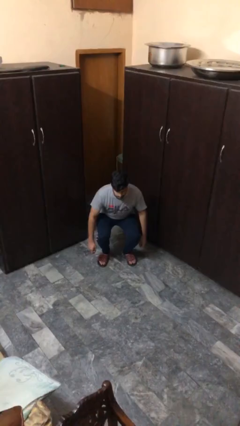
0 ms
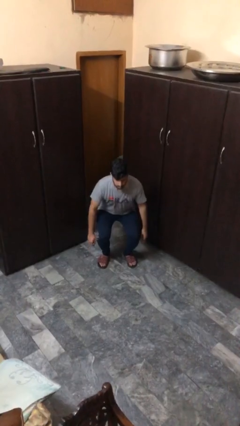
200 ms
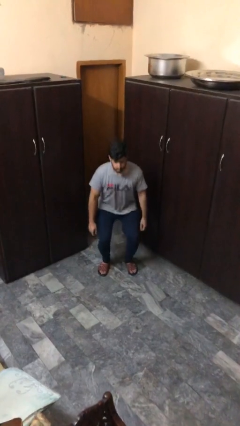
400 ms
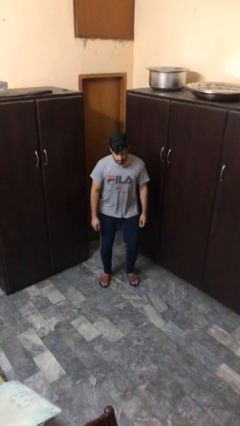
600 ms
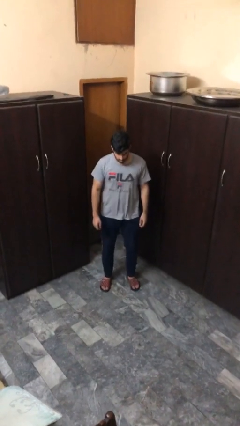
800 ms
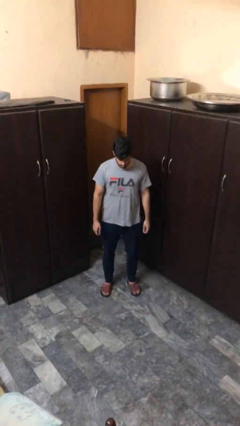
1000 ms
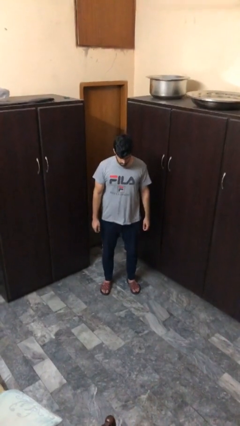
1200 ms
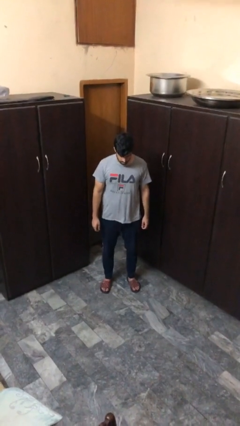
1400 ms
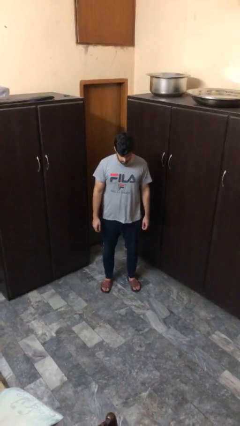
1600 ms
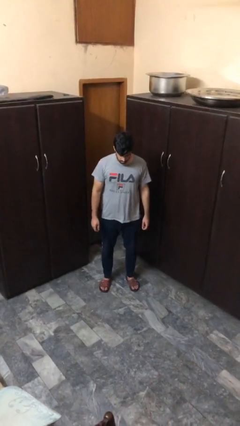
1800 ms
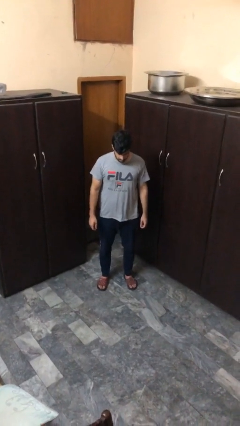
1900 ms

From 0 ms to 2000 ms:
person stands up

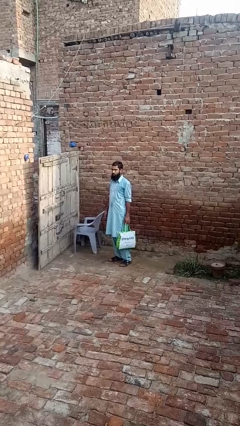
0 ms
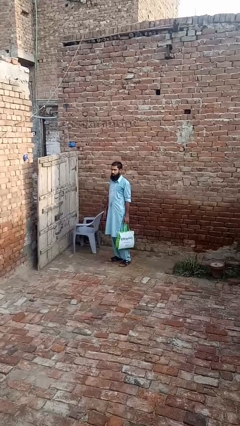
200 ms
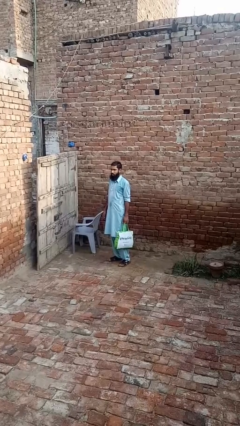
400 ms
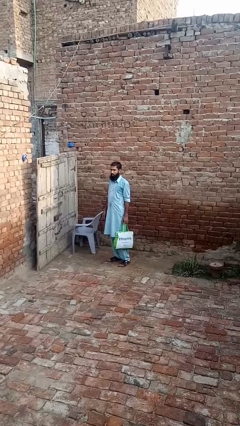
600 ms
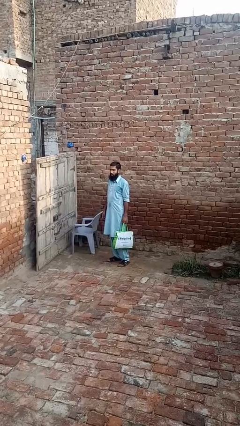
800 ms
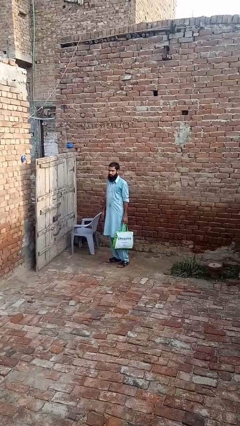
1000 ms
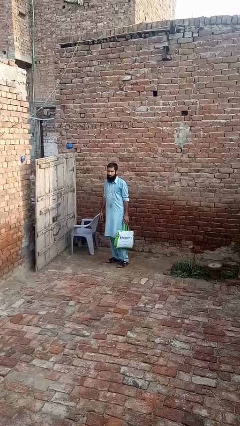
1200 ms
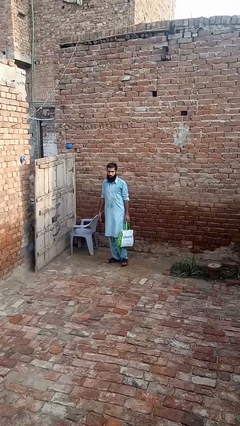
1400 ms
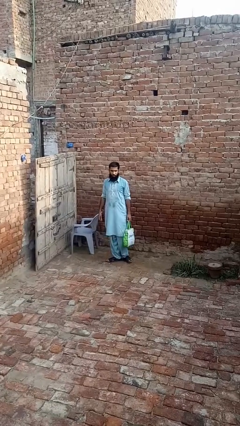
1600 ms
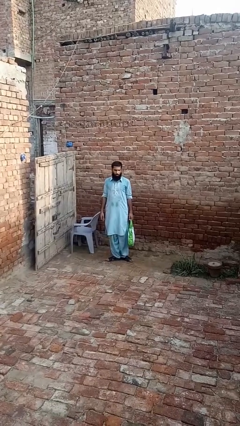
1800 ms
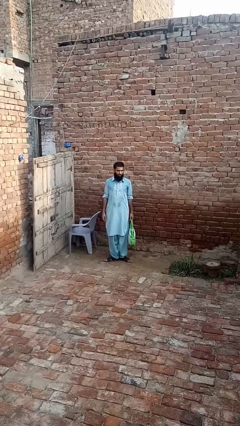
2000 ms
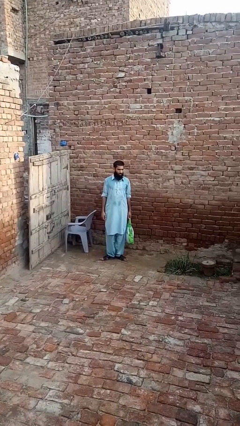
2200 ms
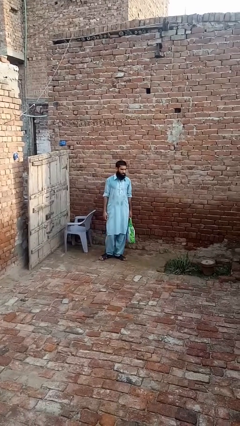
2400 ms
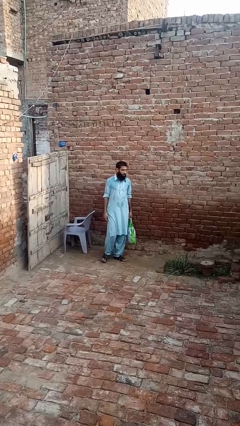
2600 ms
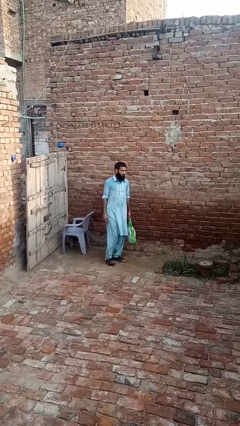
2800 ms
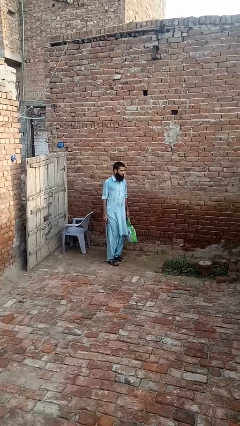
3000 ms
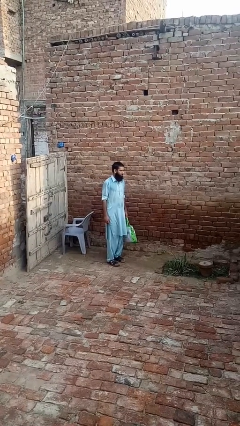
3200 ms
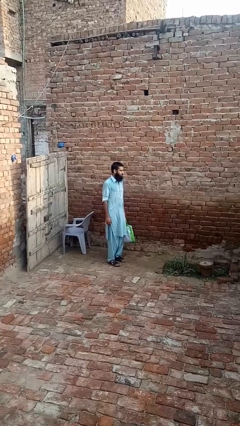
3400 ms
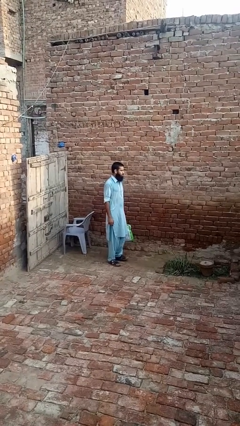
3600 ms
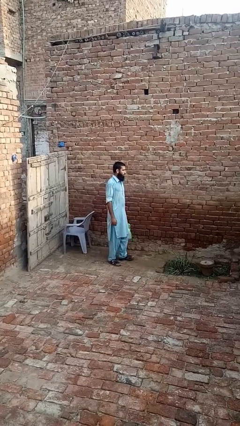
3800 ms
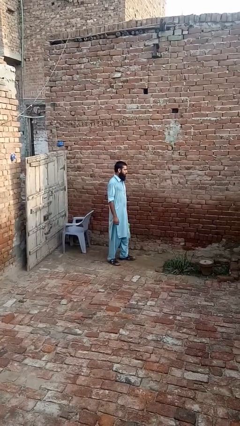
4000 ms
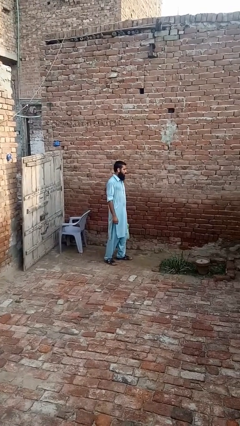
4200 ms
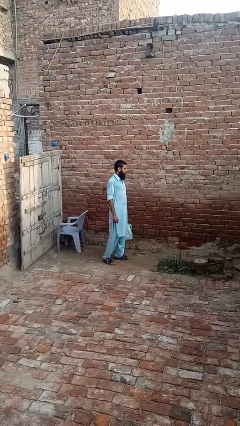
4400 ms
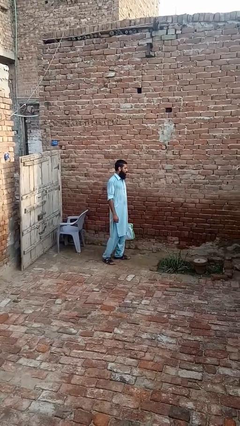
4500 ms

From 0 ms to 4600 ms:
person carries groceries

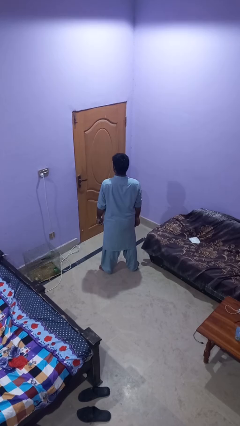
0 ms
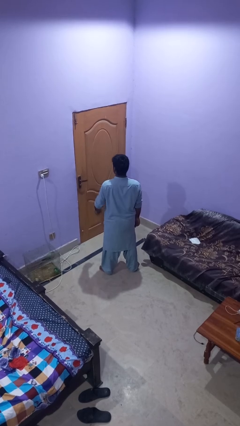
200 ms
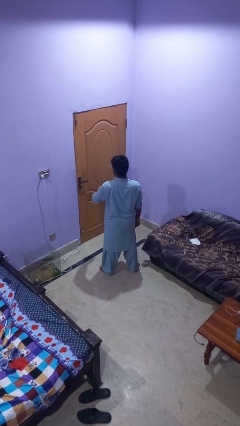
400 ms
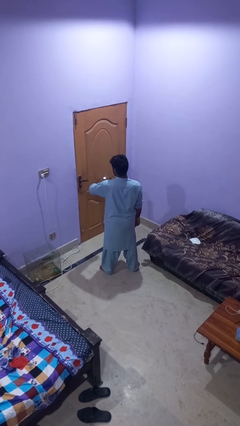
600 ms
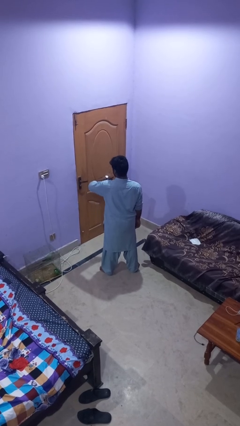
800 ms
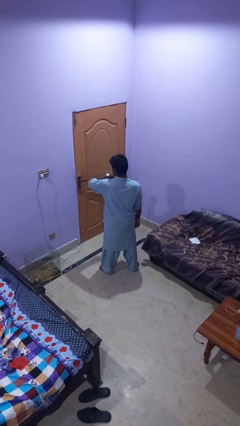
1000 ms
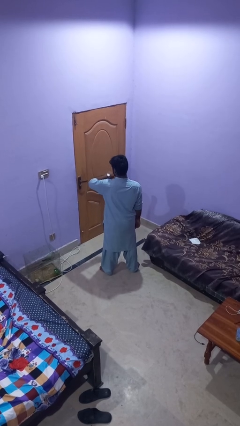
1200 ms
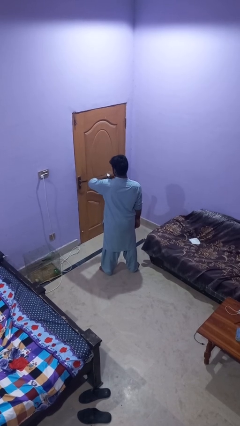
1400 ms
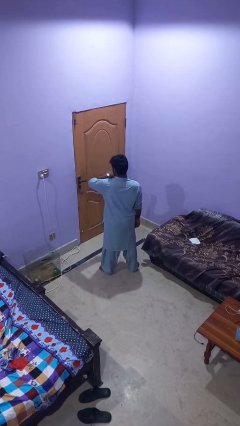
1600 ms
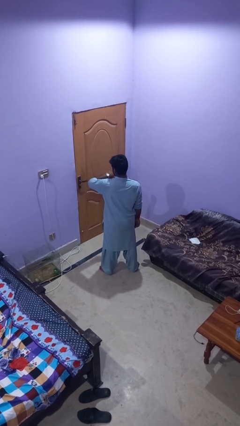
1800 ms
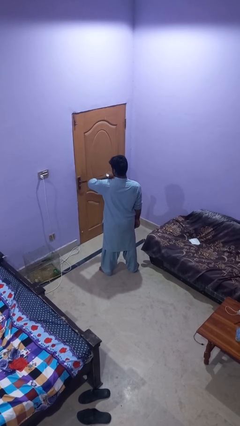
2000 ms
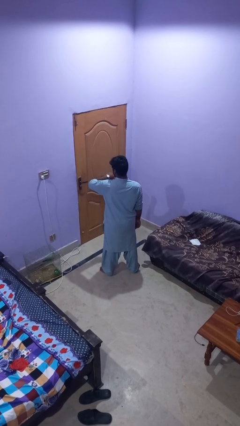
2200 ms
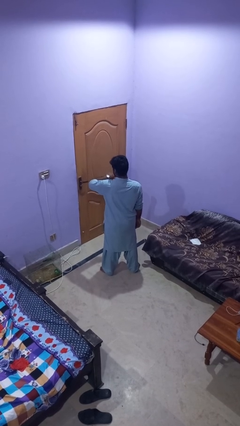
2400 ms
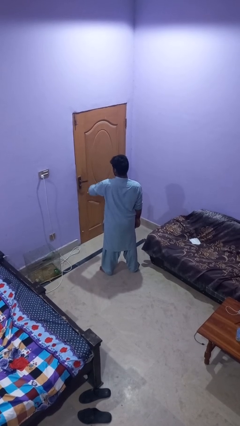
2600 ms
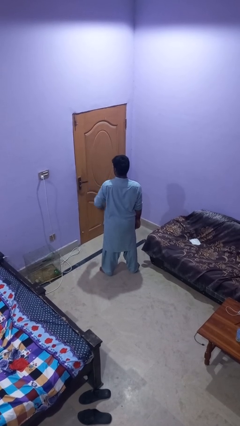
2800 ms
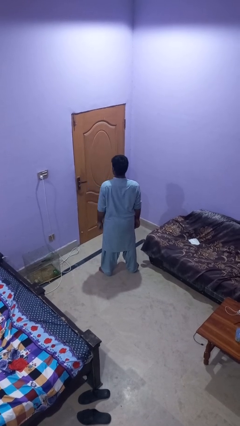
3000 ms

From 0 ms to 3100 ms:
person looks at wristwatch

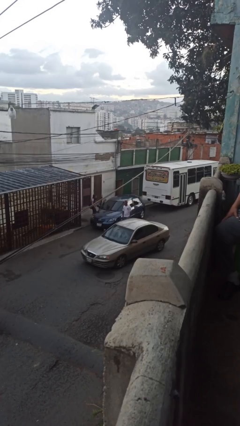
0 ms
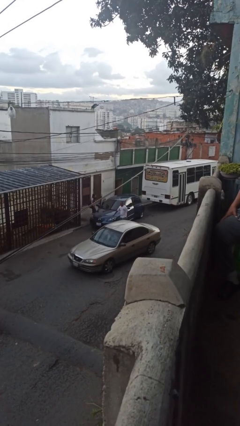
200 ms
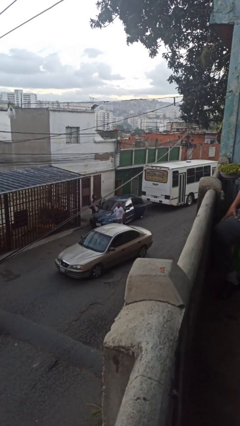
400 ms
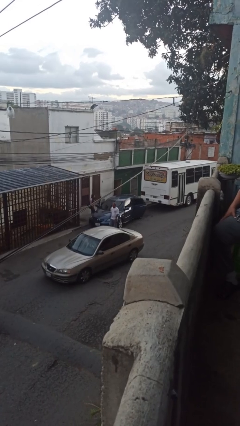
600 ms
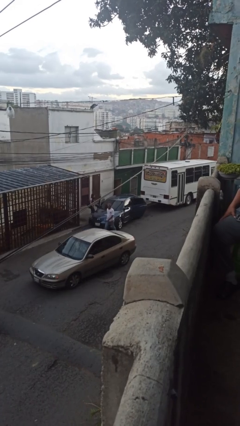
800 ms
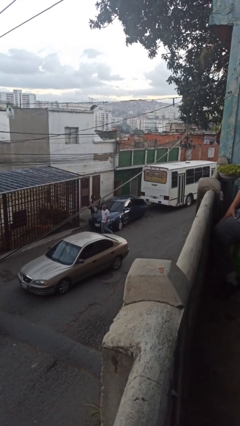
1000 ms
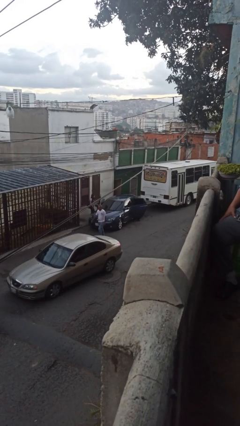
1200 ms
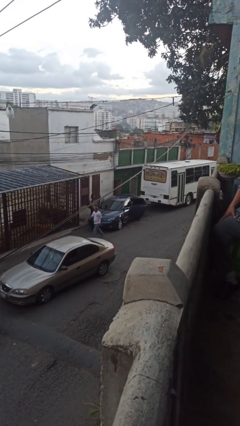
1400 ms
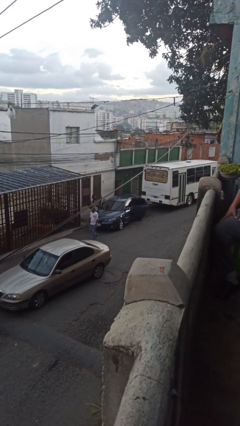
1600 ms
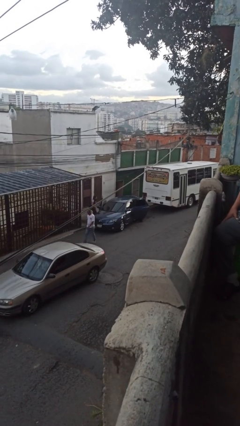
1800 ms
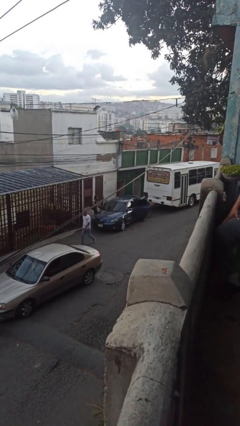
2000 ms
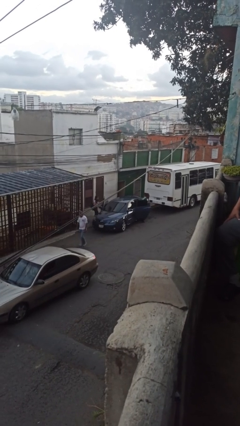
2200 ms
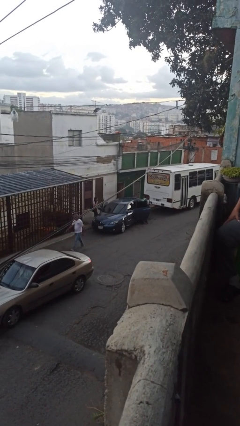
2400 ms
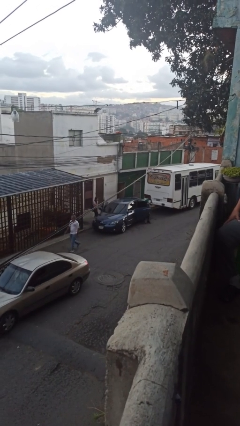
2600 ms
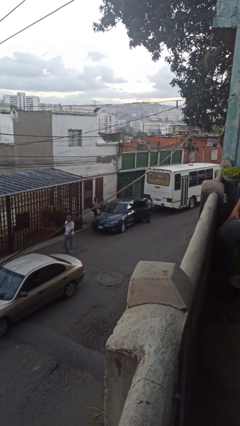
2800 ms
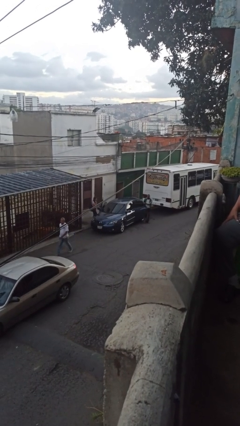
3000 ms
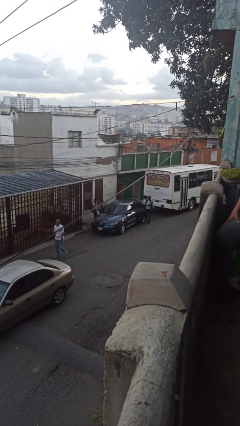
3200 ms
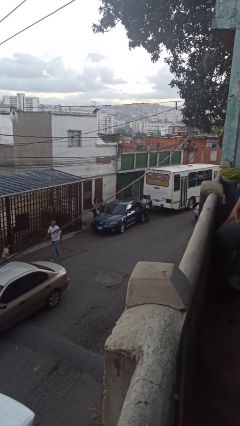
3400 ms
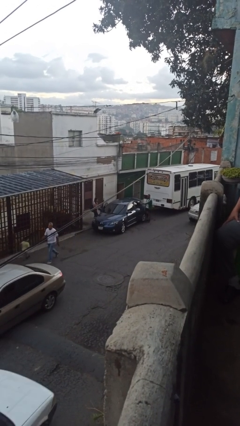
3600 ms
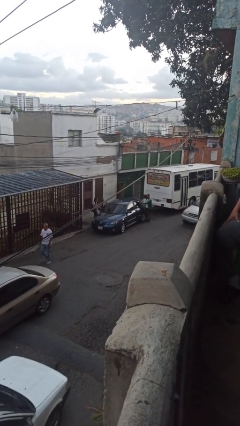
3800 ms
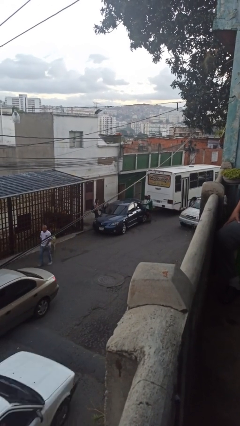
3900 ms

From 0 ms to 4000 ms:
car drops off person

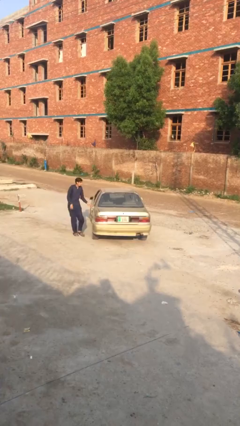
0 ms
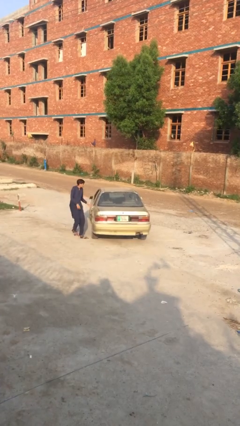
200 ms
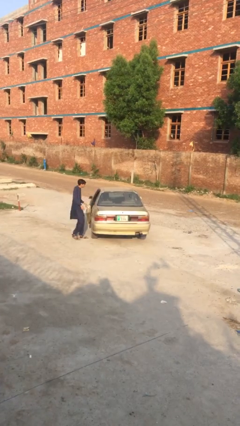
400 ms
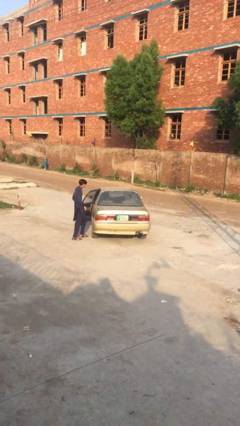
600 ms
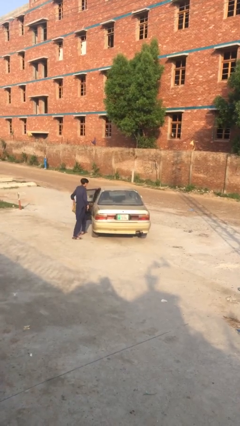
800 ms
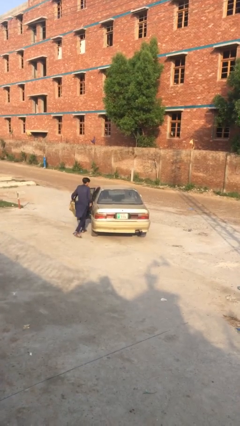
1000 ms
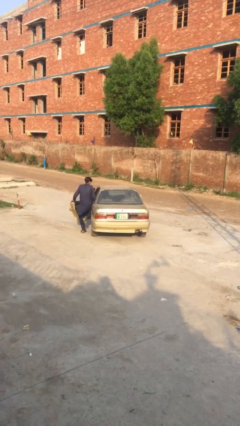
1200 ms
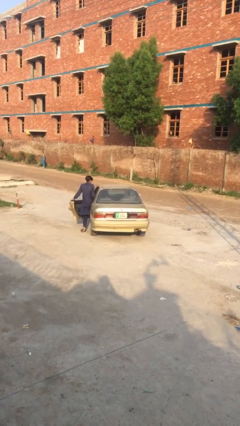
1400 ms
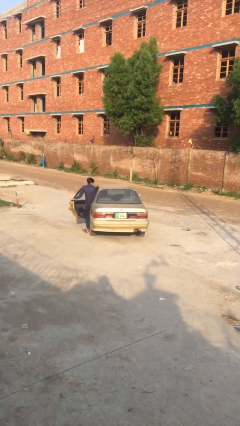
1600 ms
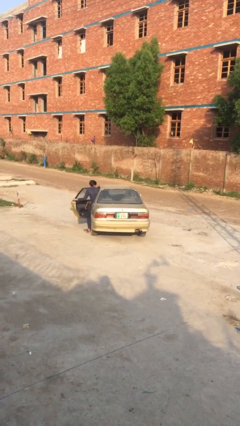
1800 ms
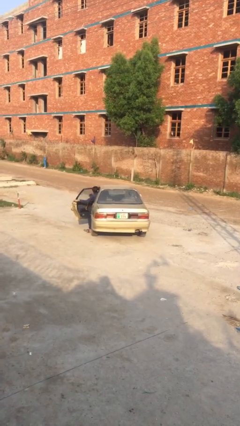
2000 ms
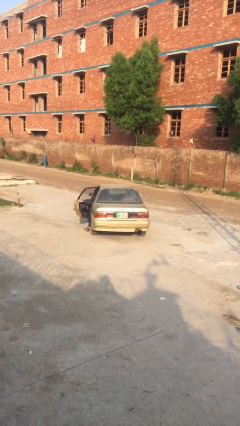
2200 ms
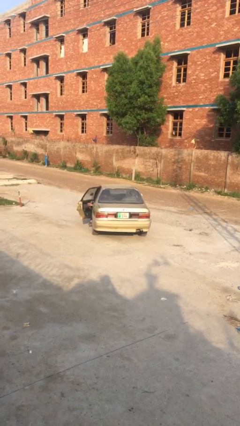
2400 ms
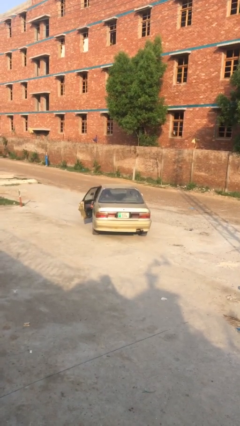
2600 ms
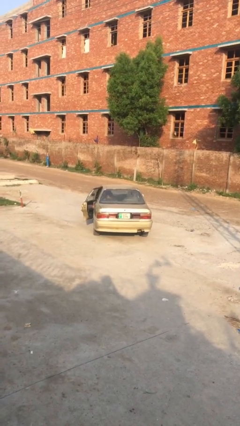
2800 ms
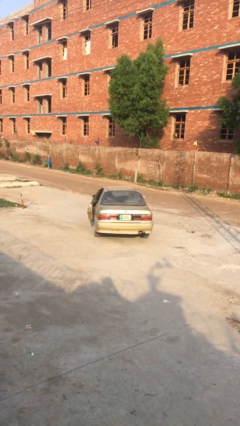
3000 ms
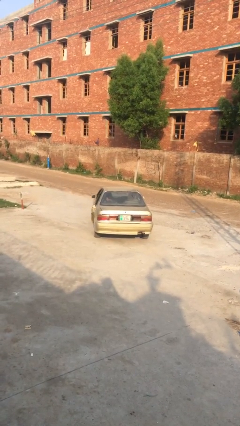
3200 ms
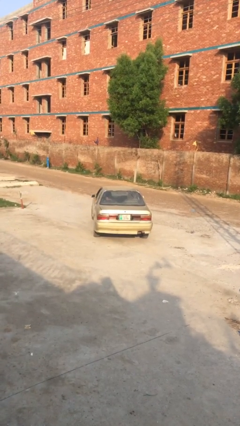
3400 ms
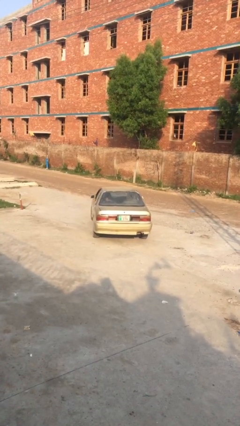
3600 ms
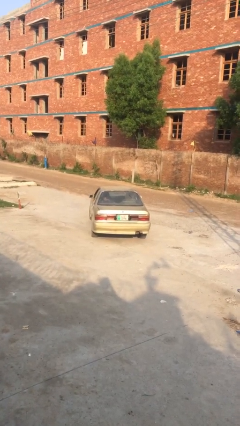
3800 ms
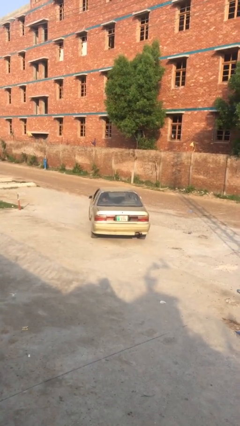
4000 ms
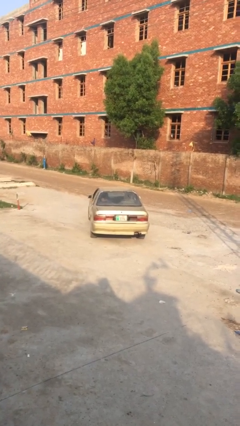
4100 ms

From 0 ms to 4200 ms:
car picks up person
